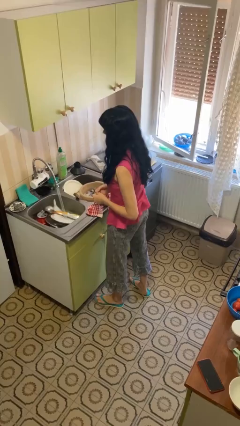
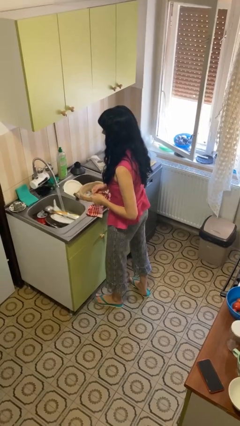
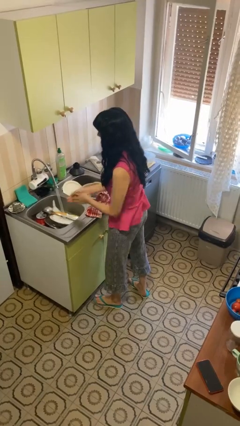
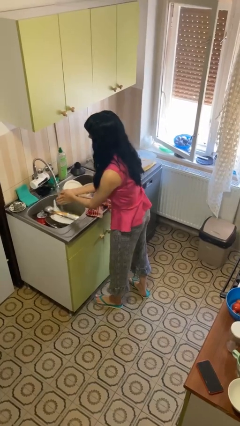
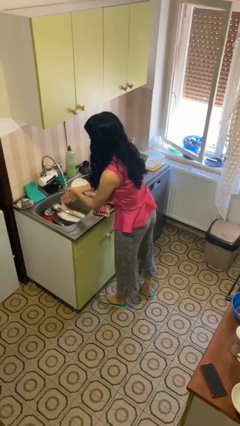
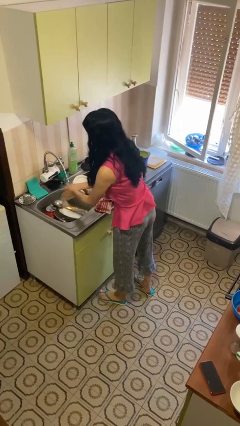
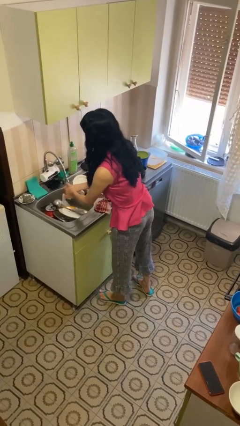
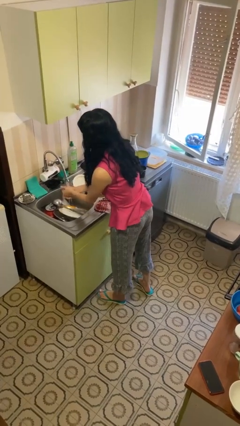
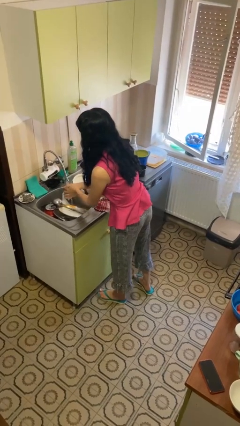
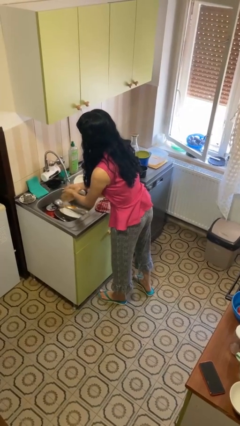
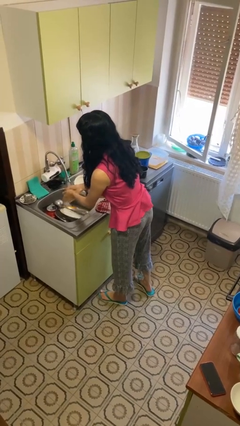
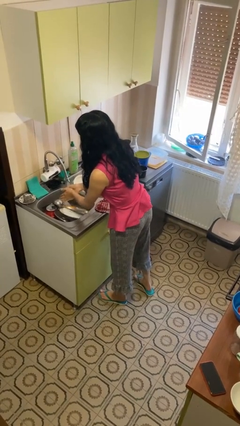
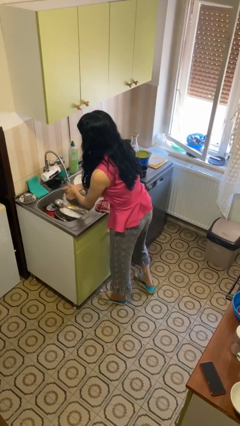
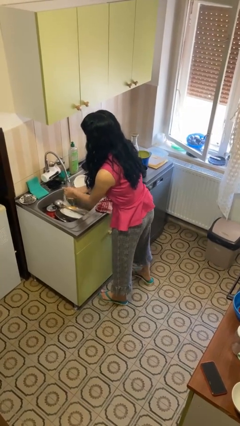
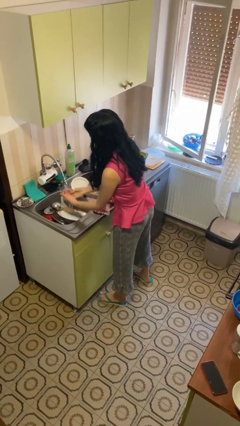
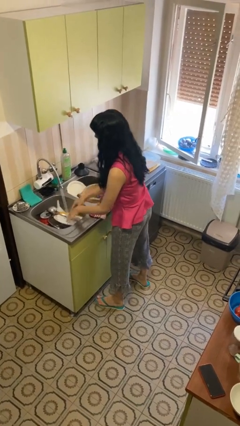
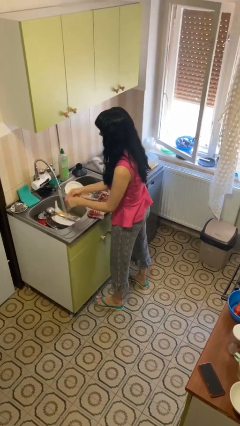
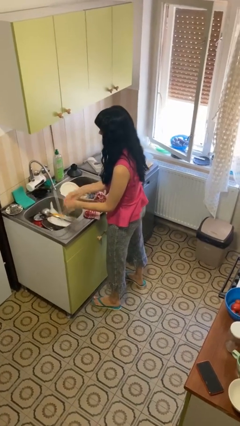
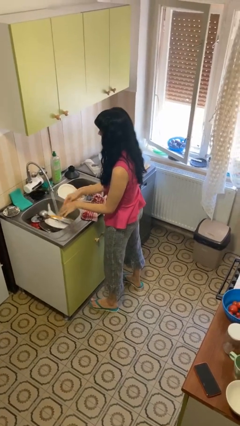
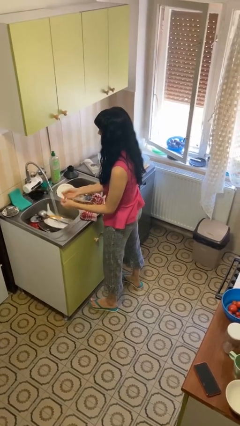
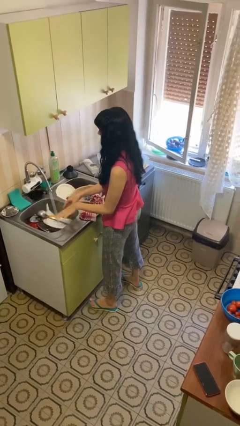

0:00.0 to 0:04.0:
person washes hands

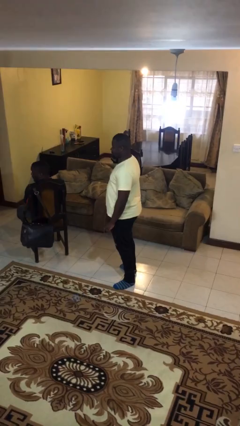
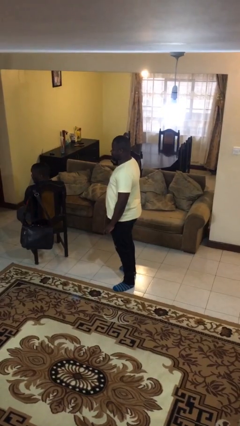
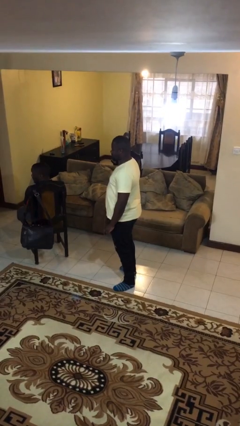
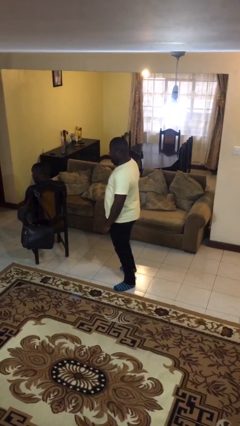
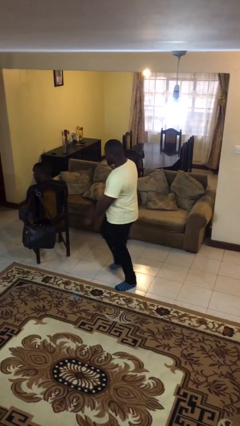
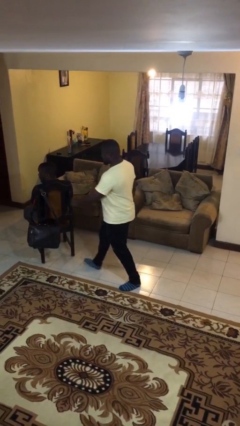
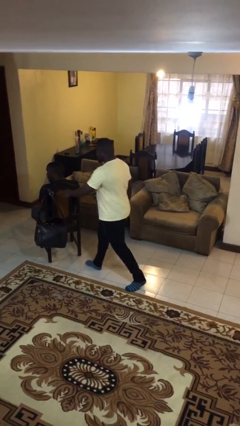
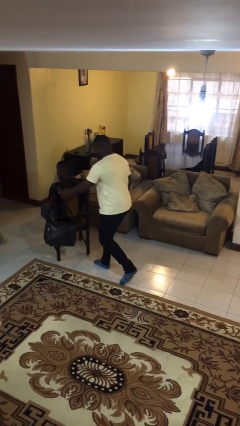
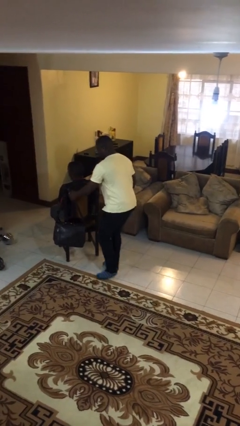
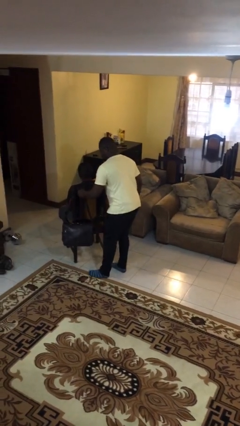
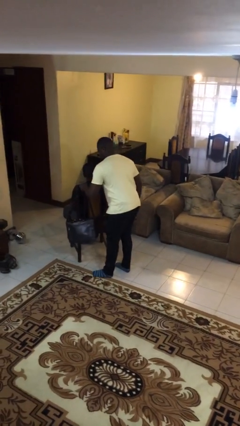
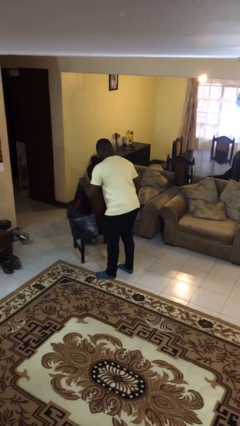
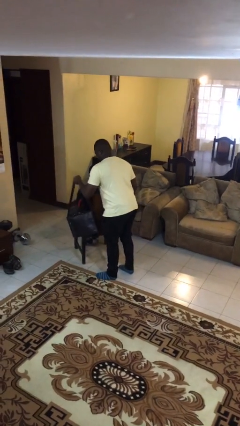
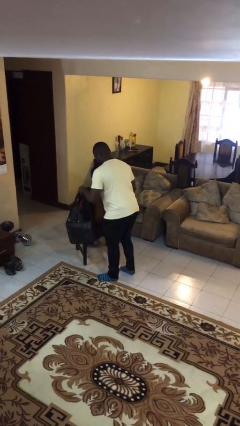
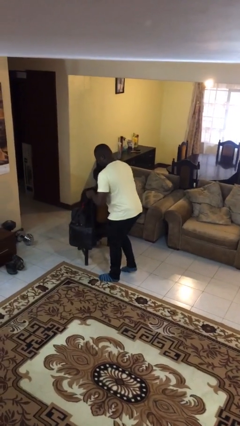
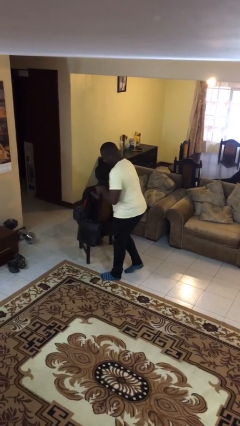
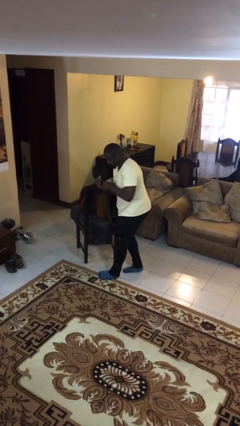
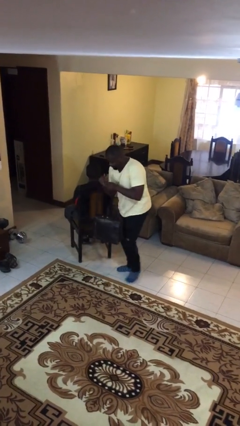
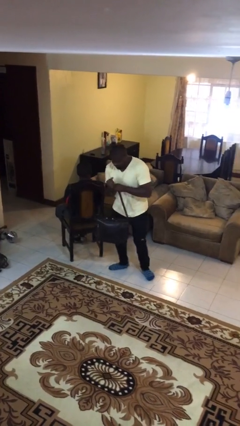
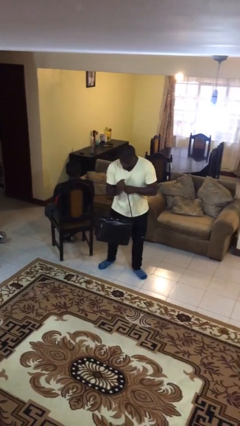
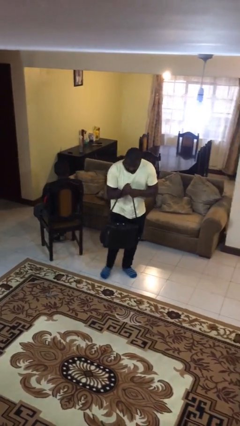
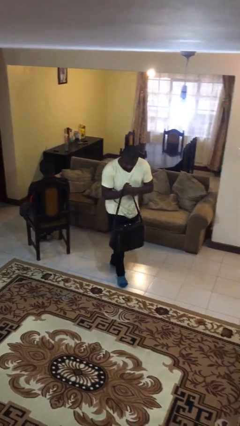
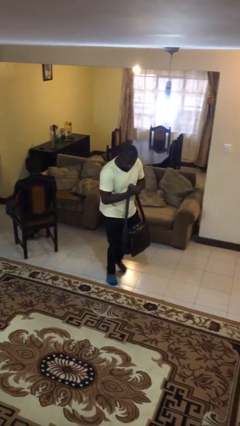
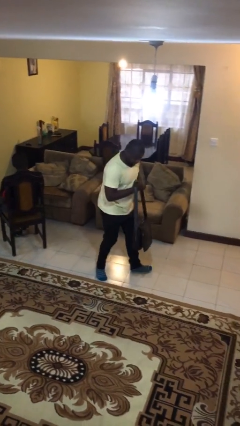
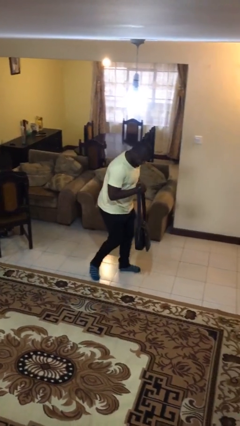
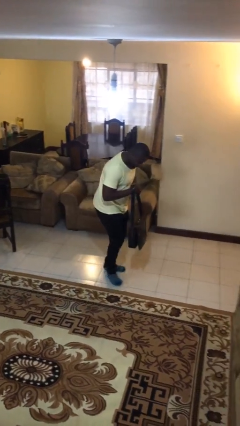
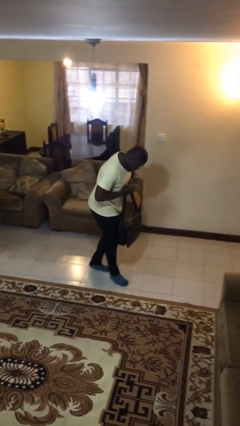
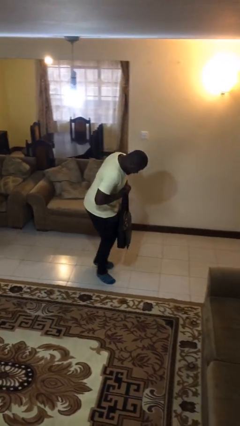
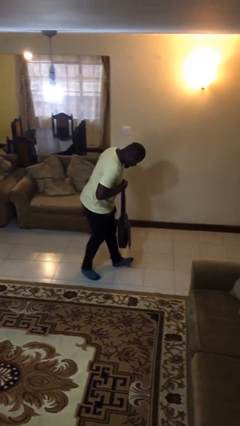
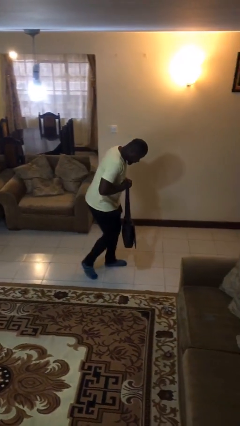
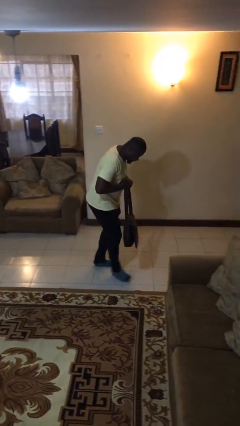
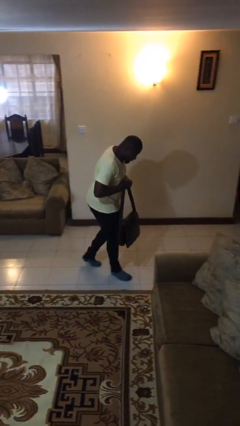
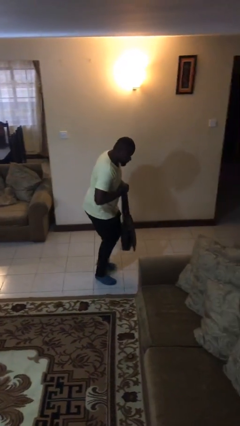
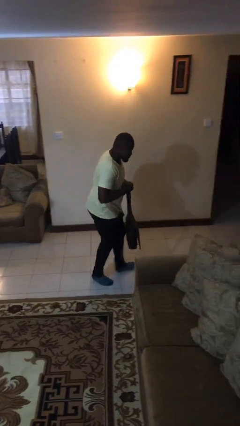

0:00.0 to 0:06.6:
person steals object from person

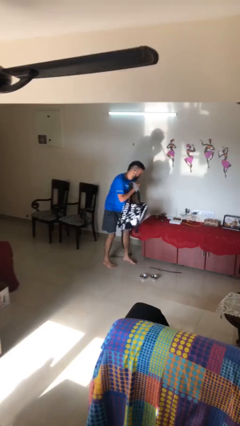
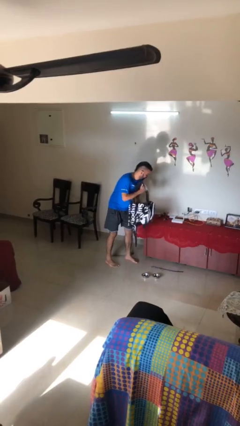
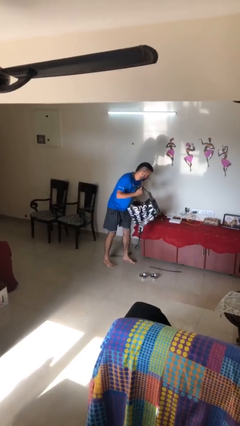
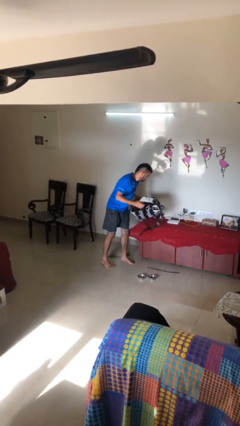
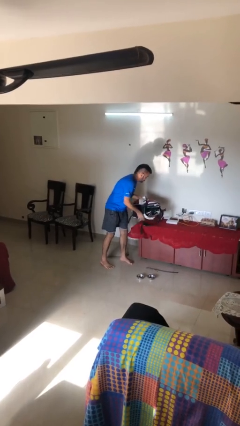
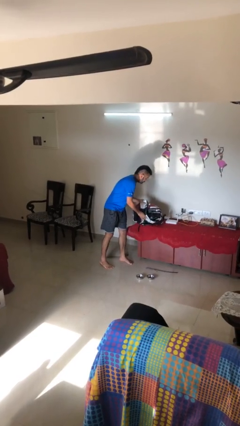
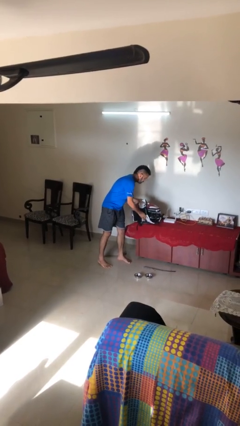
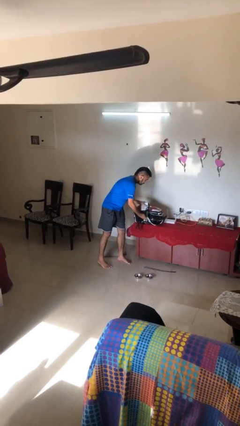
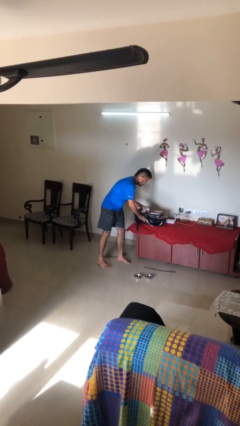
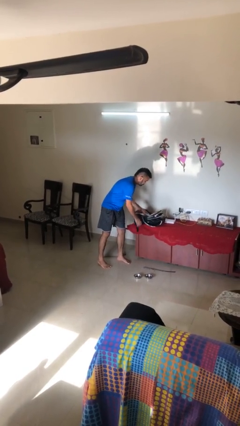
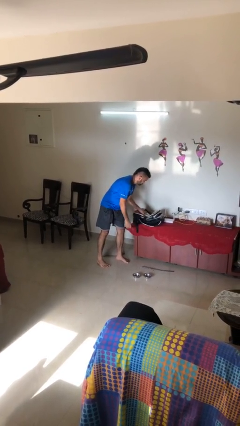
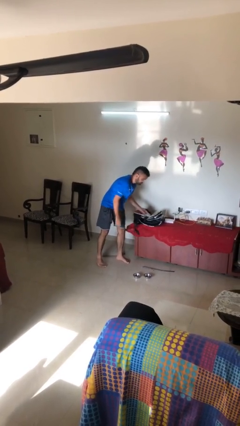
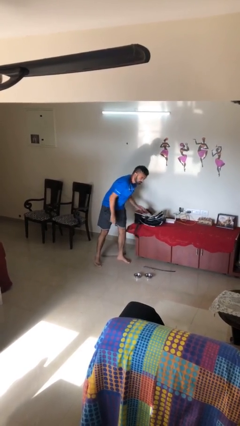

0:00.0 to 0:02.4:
person puts down object on table

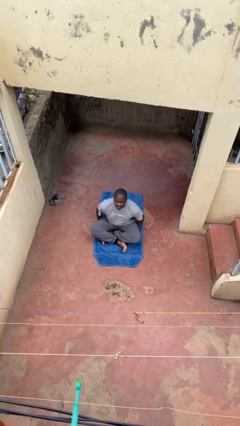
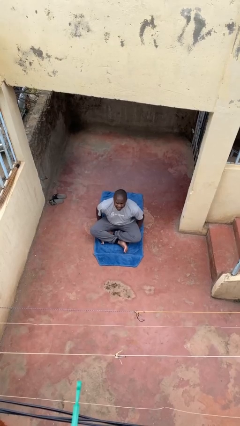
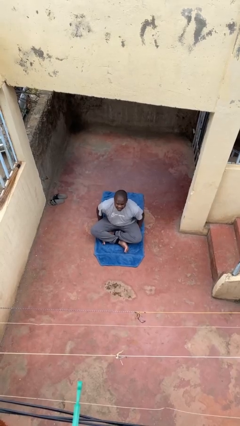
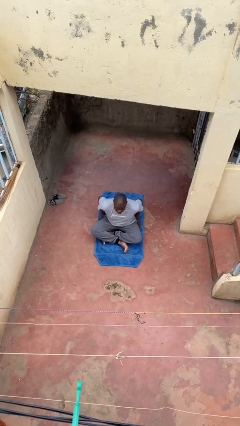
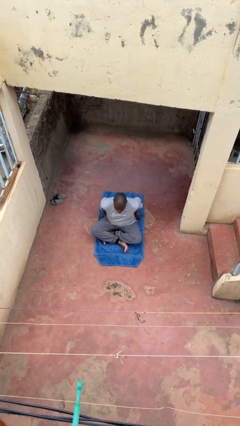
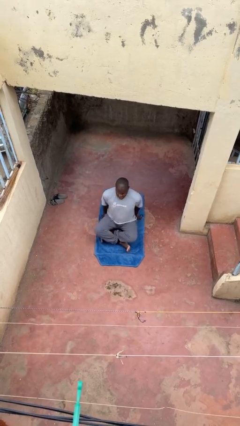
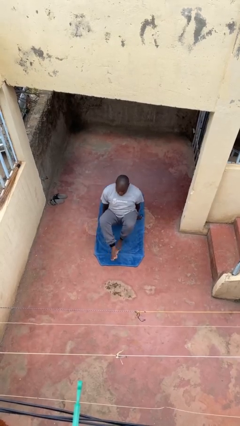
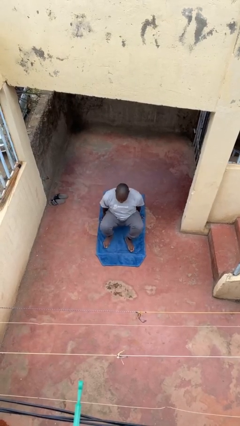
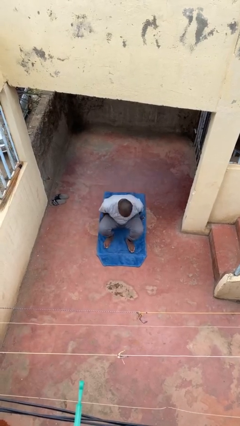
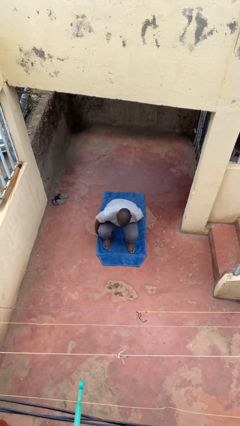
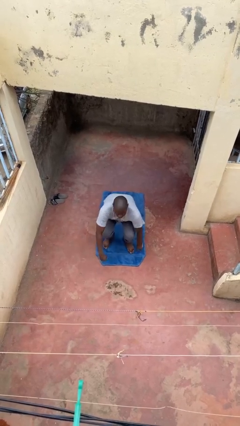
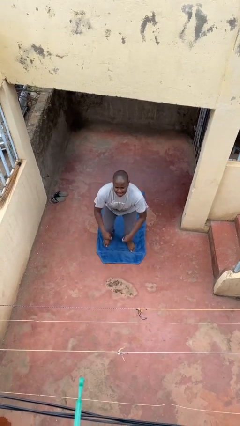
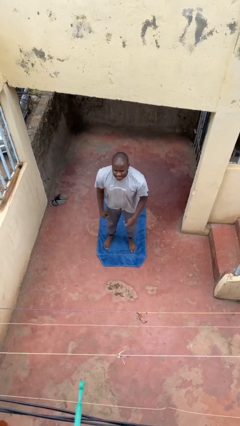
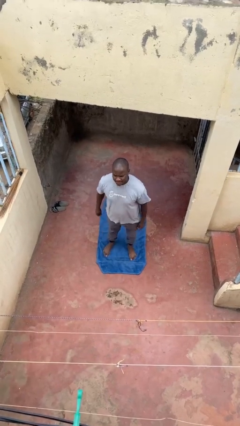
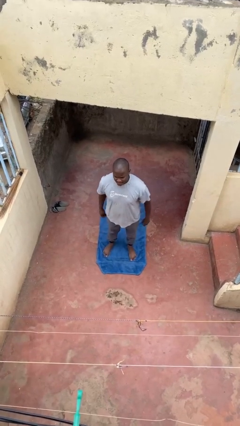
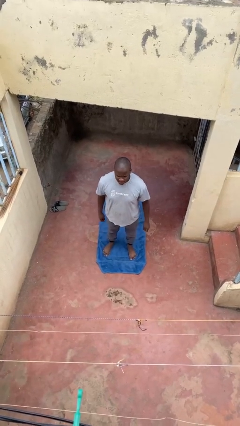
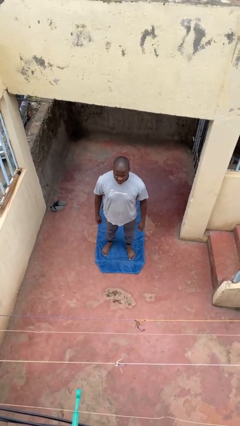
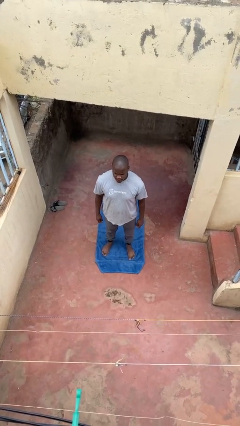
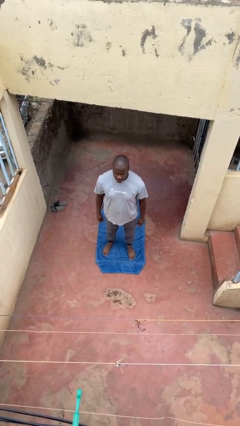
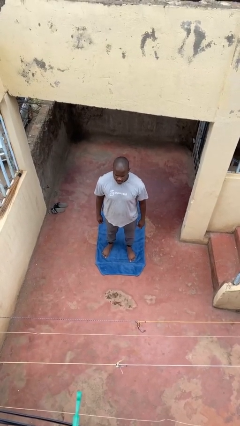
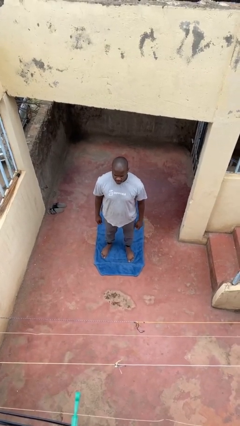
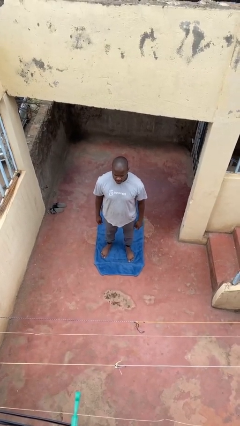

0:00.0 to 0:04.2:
person stands up from floor

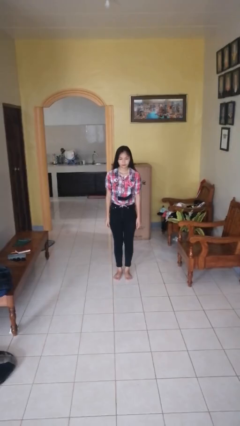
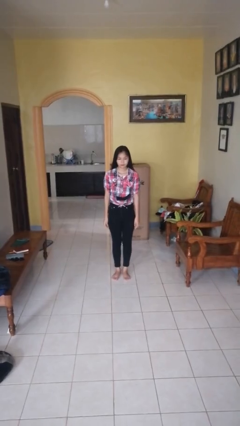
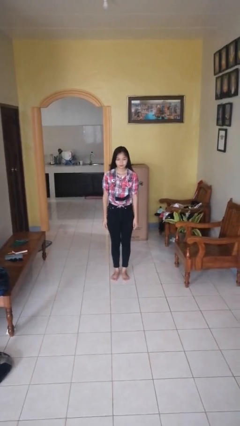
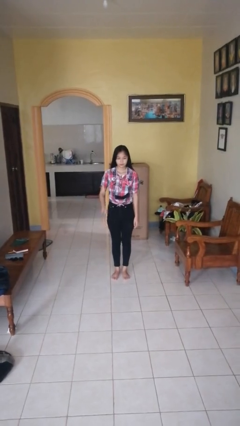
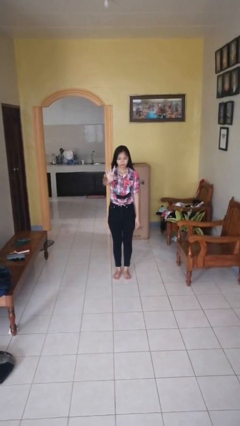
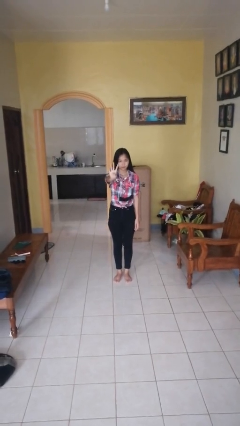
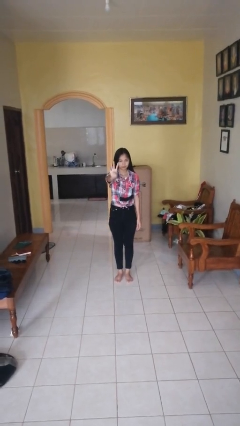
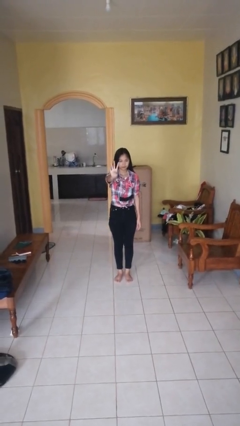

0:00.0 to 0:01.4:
person gestures number four
